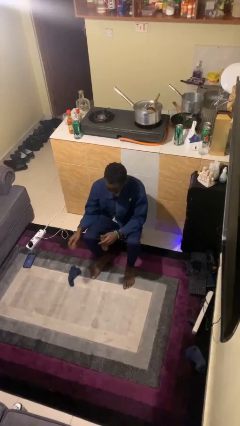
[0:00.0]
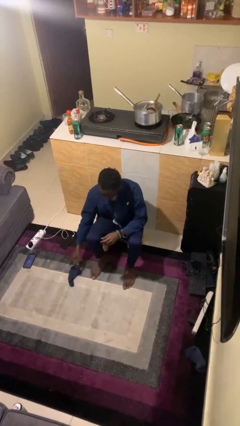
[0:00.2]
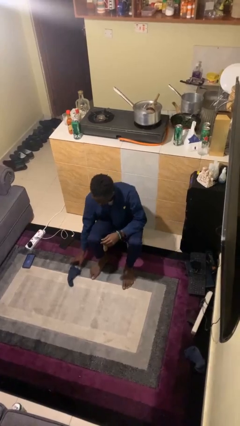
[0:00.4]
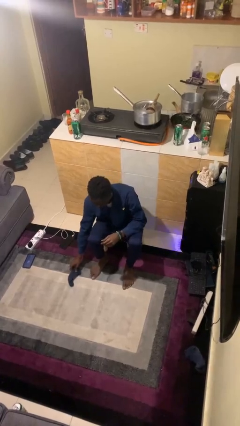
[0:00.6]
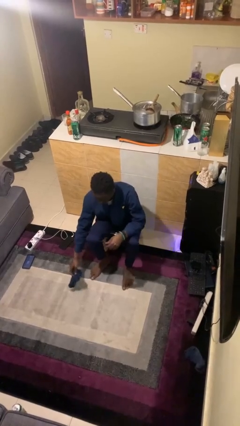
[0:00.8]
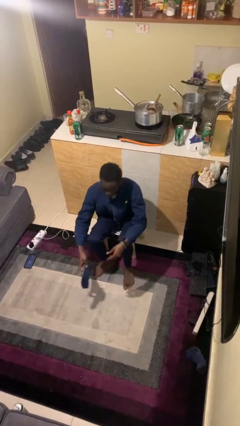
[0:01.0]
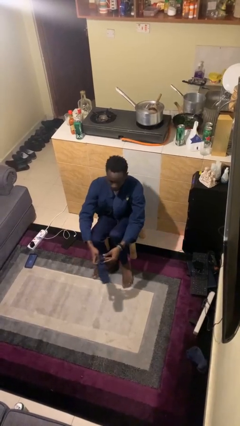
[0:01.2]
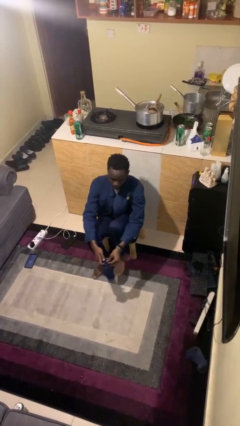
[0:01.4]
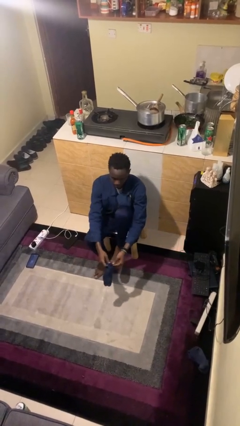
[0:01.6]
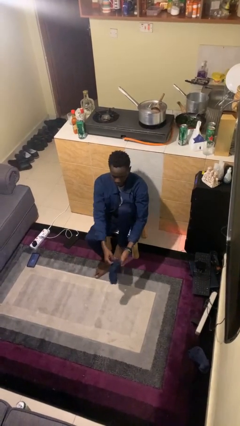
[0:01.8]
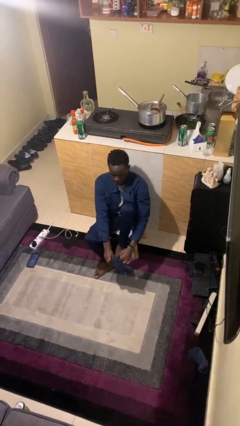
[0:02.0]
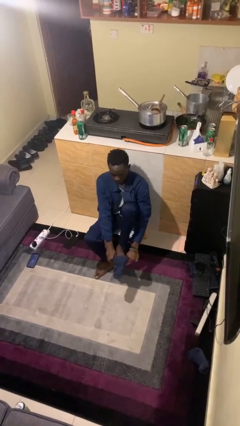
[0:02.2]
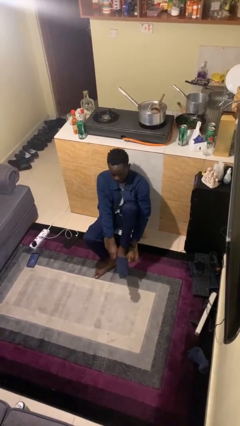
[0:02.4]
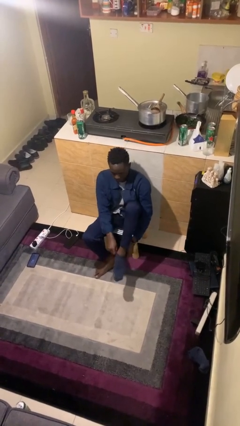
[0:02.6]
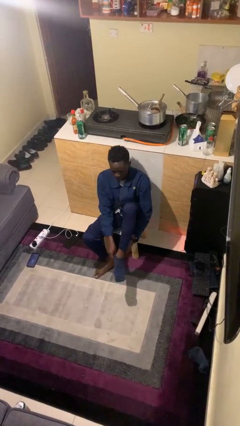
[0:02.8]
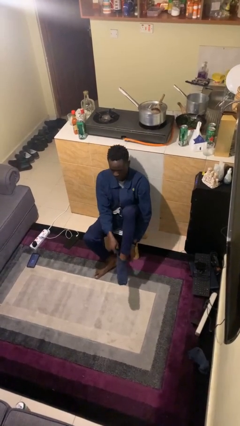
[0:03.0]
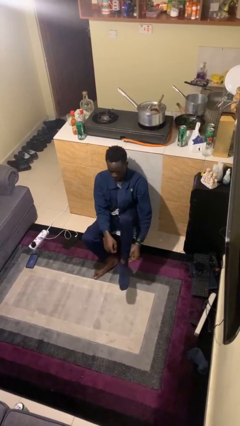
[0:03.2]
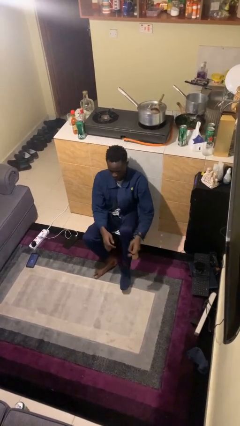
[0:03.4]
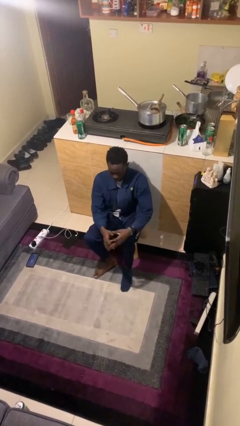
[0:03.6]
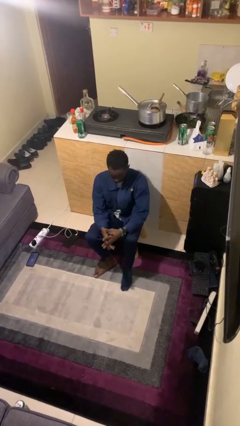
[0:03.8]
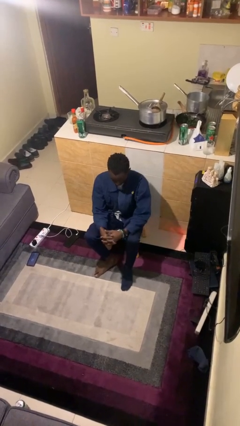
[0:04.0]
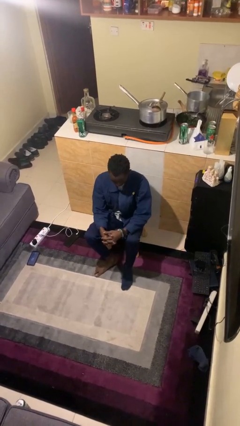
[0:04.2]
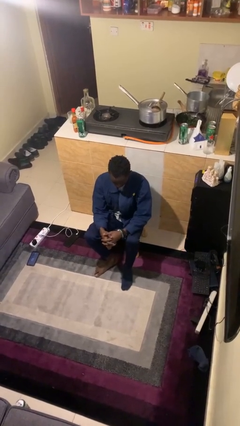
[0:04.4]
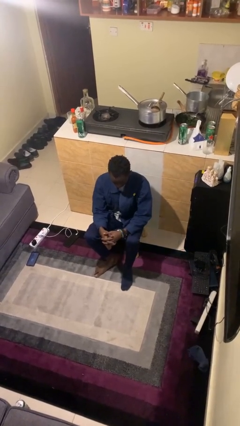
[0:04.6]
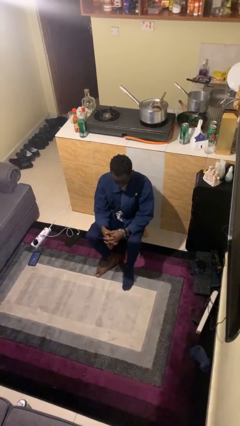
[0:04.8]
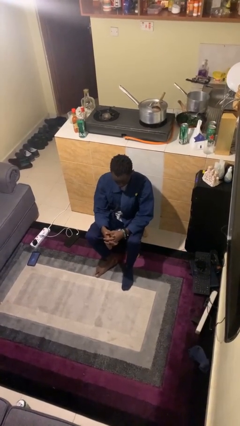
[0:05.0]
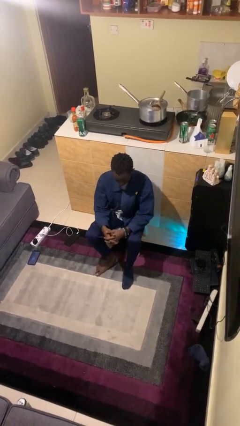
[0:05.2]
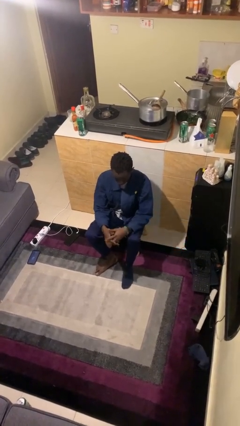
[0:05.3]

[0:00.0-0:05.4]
person puts on socks

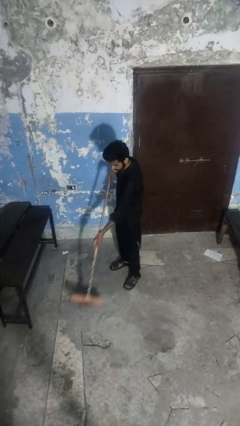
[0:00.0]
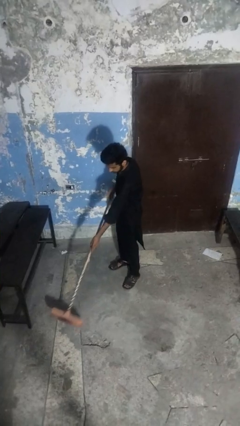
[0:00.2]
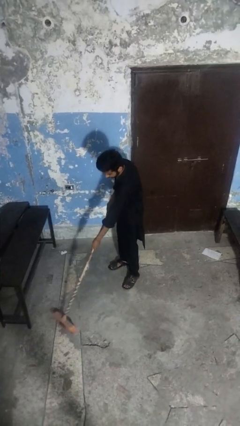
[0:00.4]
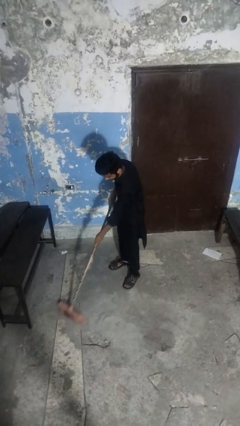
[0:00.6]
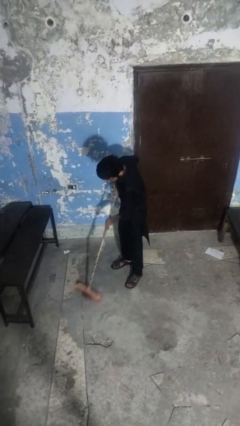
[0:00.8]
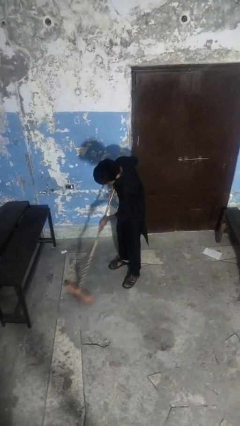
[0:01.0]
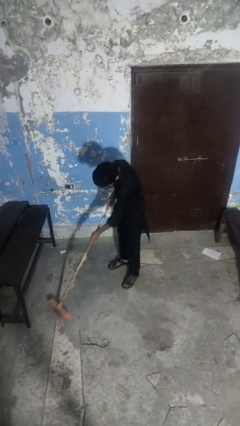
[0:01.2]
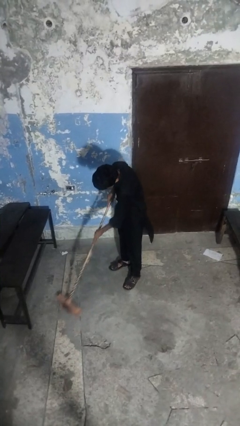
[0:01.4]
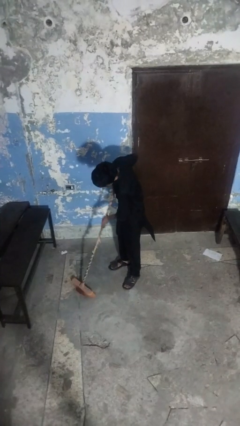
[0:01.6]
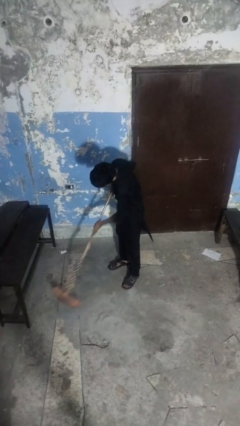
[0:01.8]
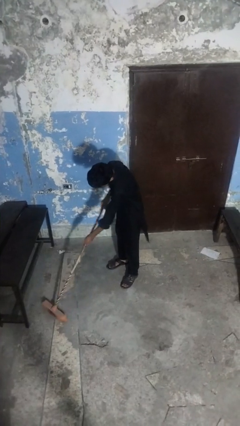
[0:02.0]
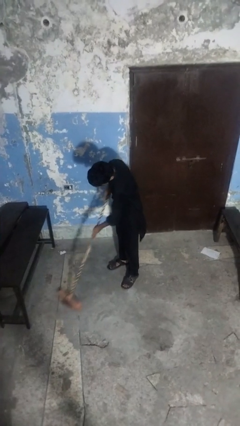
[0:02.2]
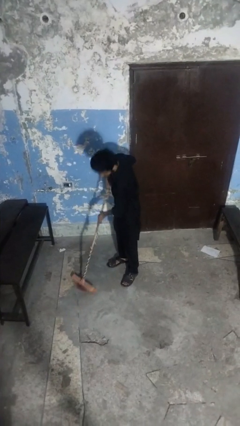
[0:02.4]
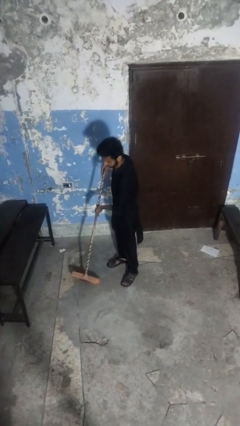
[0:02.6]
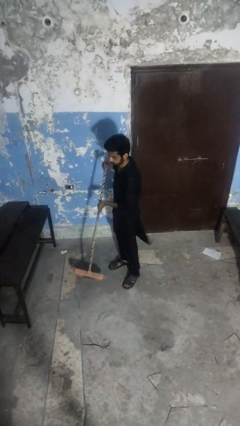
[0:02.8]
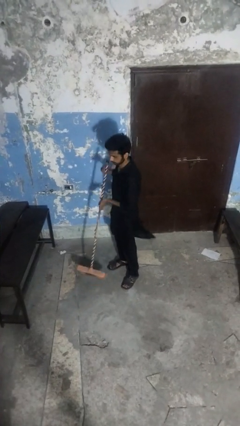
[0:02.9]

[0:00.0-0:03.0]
person sweeps floor

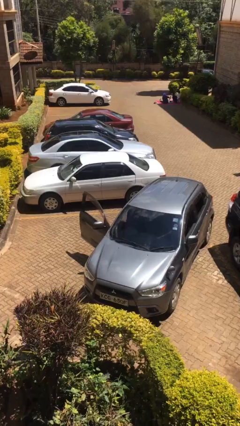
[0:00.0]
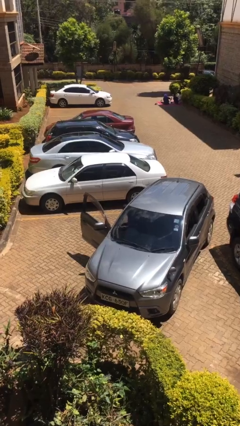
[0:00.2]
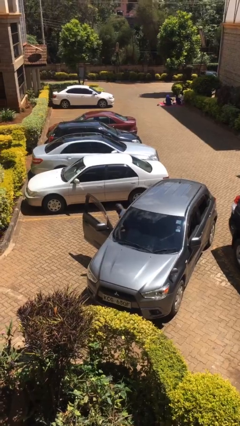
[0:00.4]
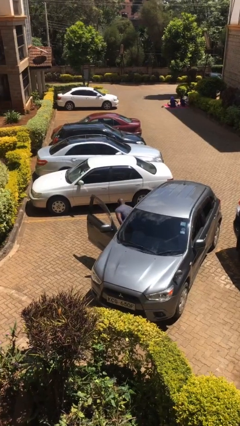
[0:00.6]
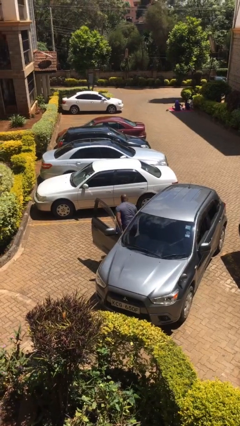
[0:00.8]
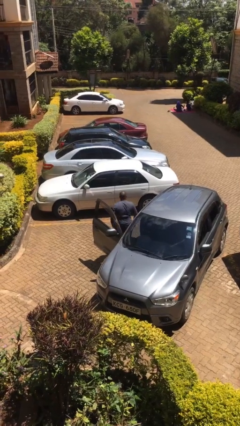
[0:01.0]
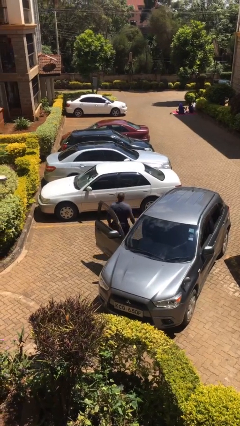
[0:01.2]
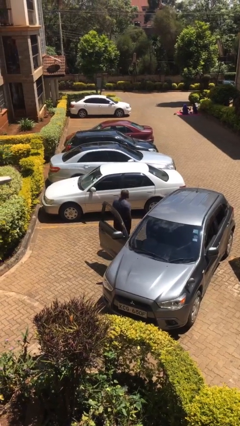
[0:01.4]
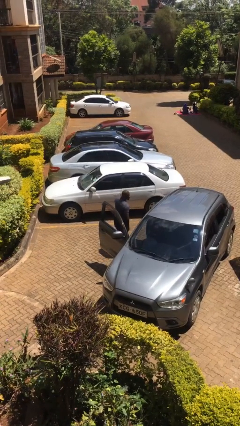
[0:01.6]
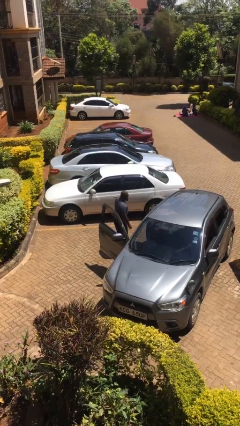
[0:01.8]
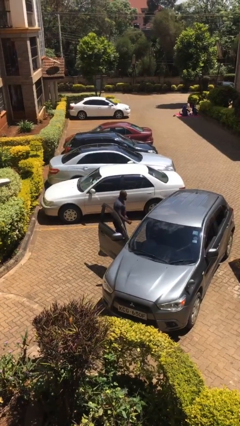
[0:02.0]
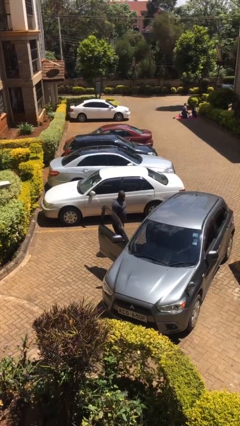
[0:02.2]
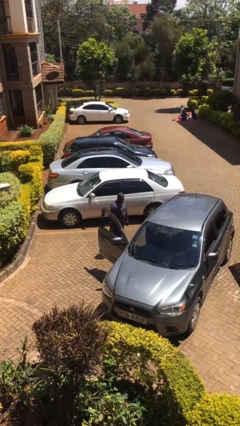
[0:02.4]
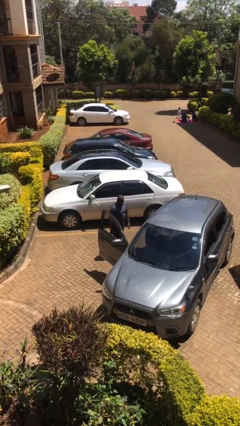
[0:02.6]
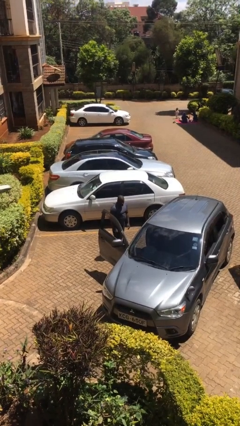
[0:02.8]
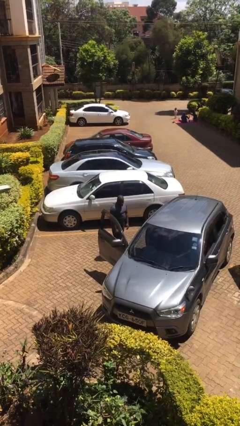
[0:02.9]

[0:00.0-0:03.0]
person exits car

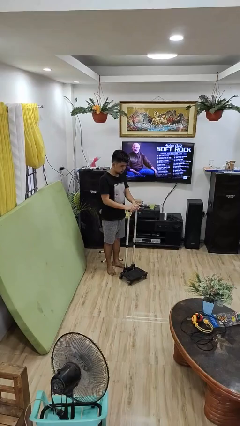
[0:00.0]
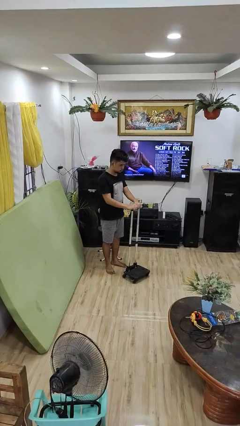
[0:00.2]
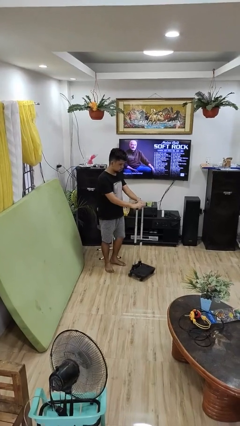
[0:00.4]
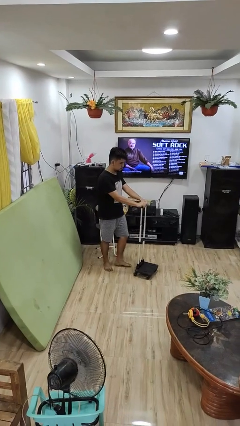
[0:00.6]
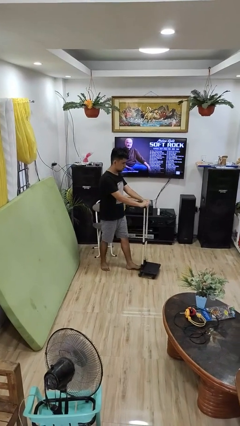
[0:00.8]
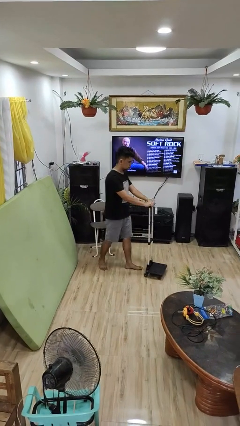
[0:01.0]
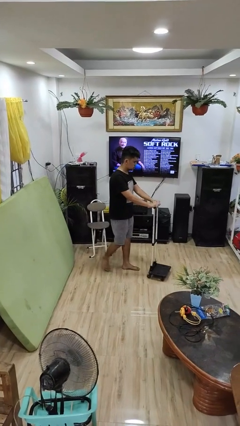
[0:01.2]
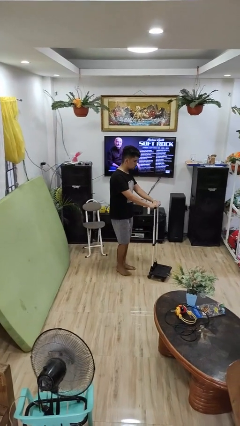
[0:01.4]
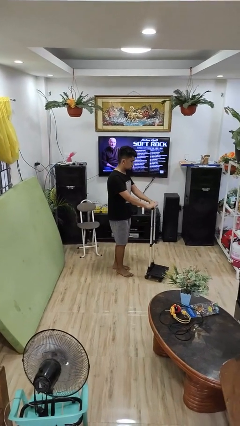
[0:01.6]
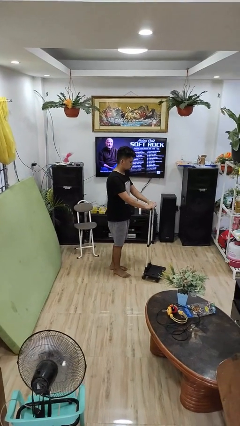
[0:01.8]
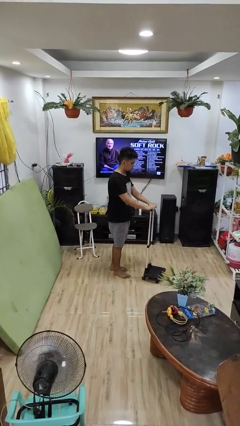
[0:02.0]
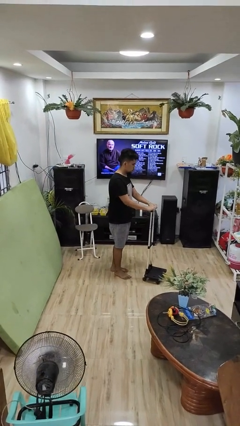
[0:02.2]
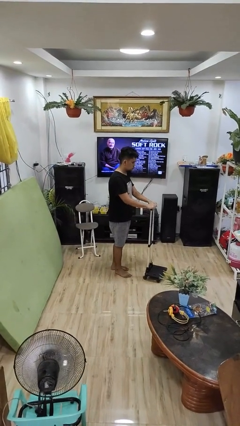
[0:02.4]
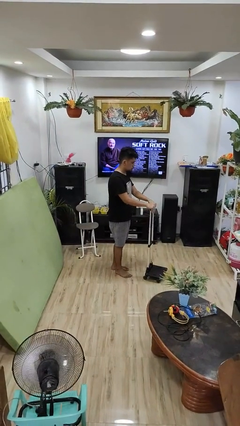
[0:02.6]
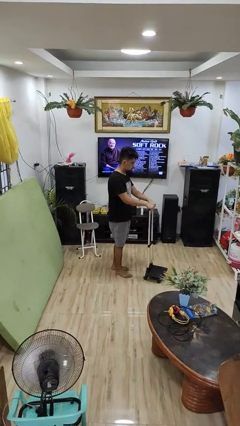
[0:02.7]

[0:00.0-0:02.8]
person pushes wheeled cart

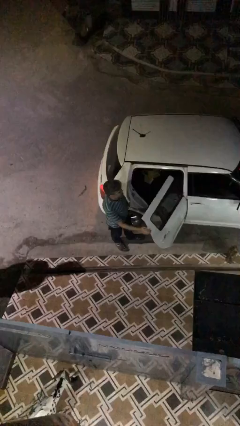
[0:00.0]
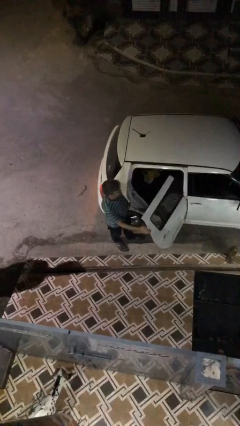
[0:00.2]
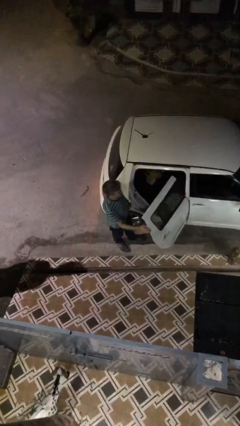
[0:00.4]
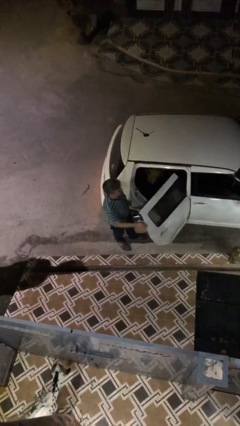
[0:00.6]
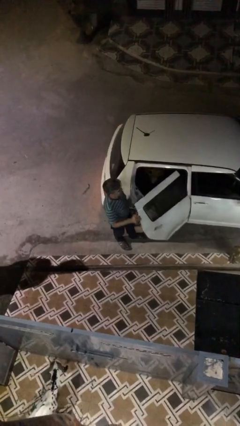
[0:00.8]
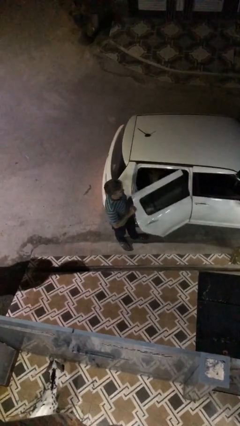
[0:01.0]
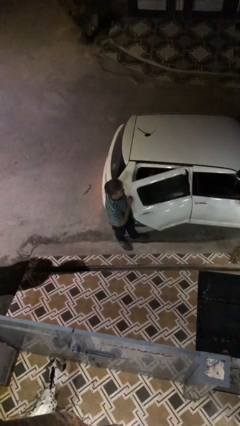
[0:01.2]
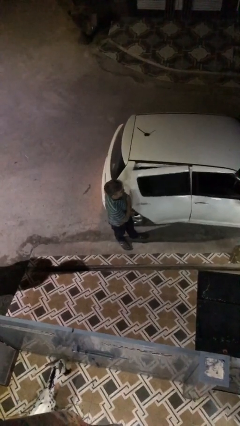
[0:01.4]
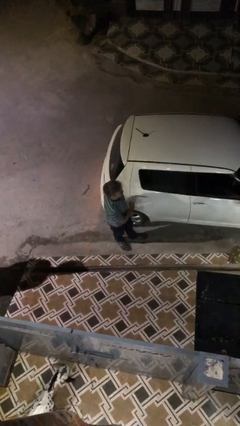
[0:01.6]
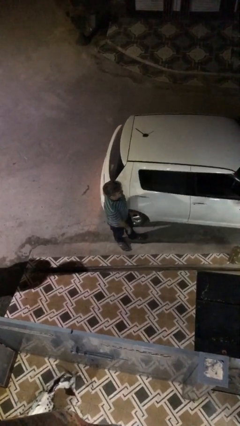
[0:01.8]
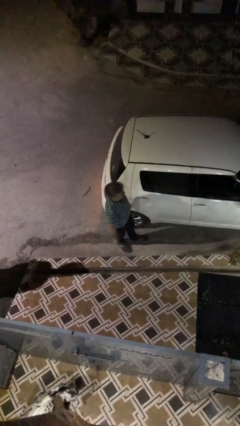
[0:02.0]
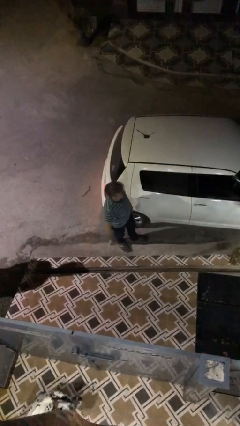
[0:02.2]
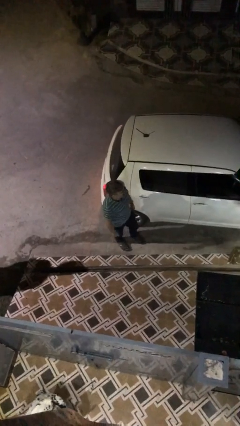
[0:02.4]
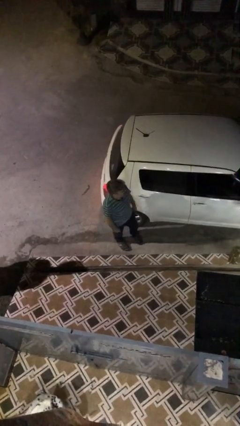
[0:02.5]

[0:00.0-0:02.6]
person closes car door

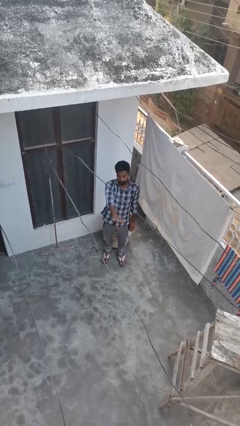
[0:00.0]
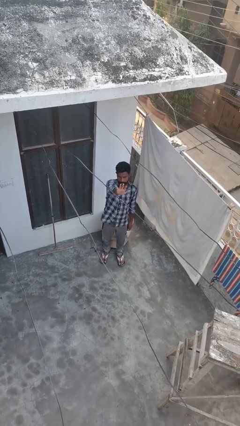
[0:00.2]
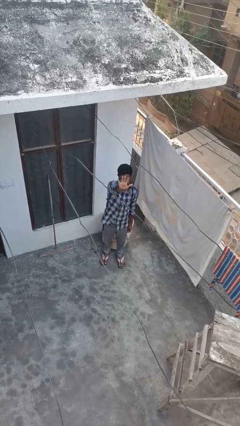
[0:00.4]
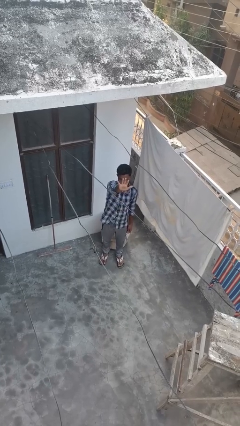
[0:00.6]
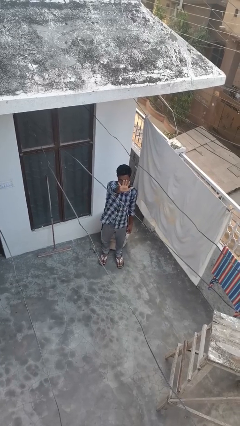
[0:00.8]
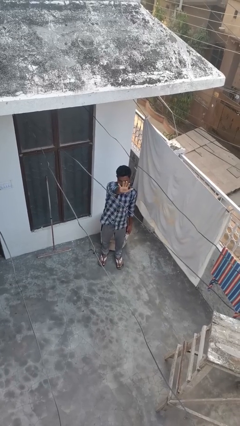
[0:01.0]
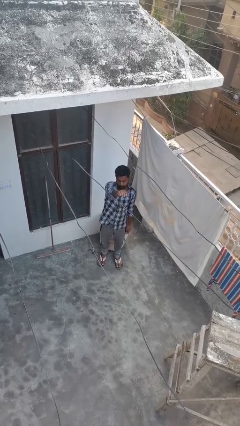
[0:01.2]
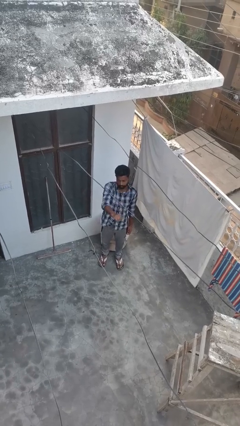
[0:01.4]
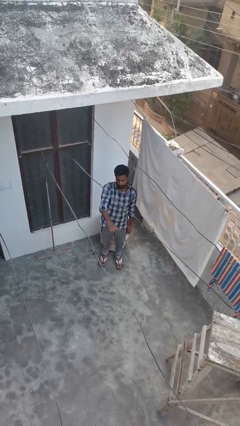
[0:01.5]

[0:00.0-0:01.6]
person gestures number five
